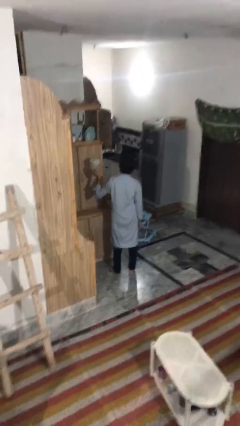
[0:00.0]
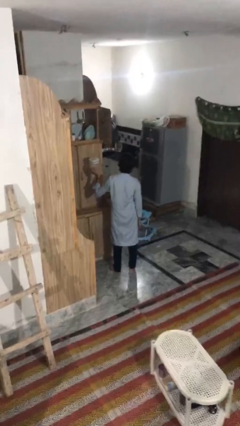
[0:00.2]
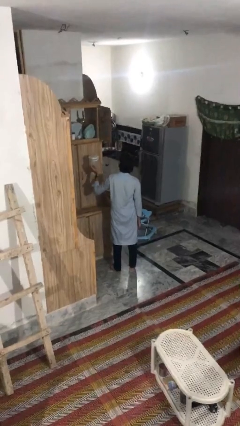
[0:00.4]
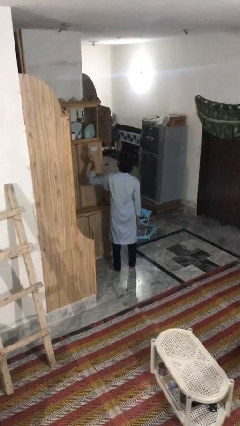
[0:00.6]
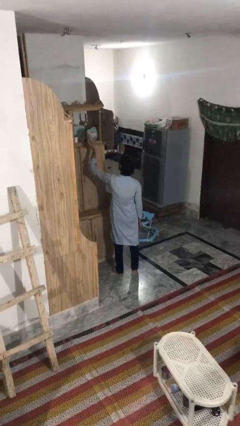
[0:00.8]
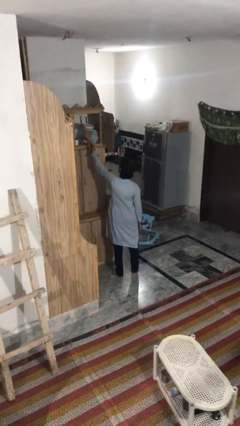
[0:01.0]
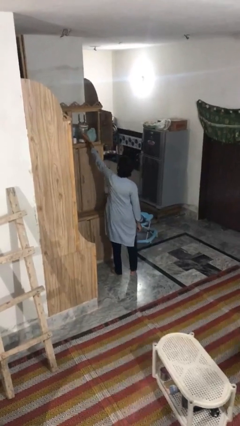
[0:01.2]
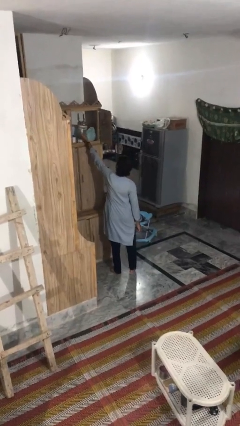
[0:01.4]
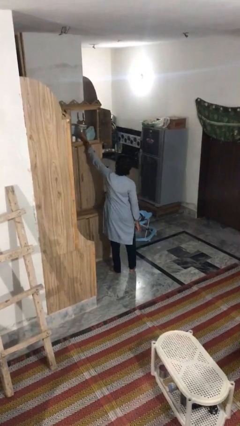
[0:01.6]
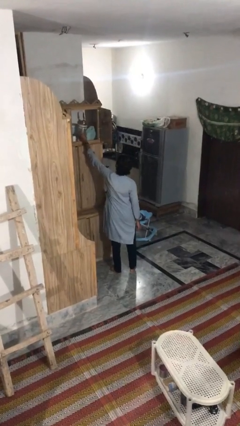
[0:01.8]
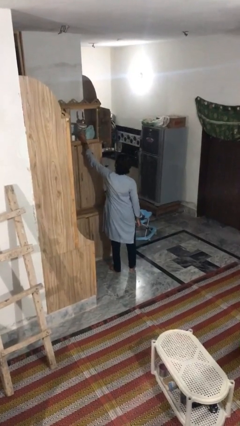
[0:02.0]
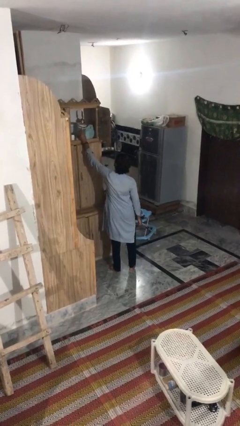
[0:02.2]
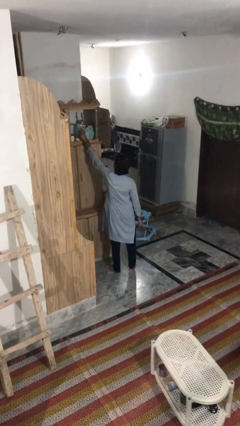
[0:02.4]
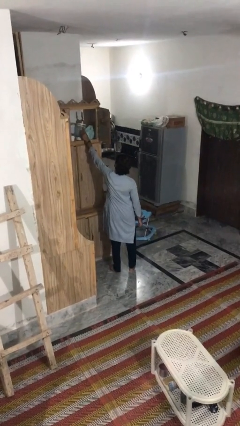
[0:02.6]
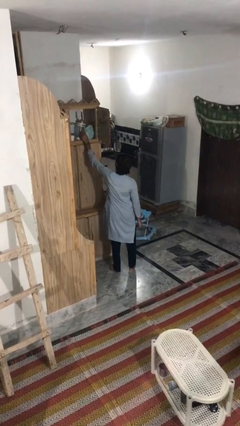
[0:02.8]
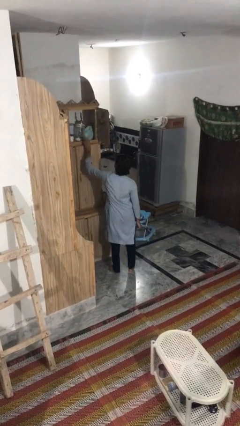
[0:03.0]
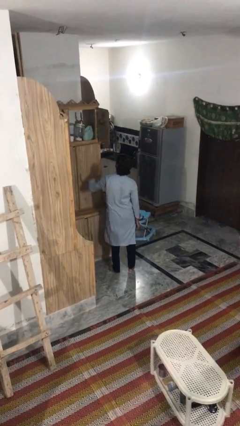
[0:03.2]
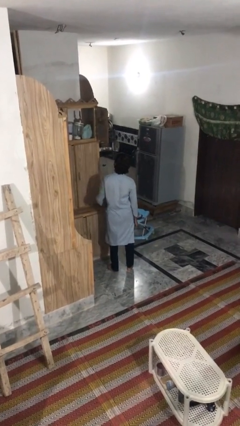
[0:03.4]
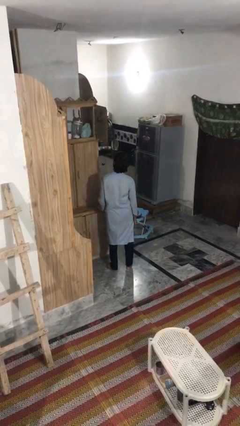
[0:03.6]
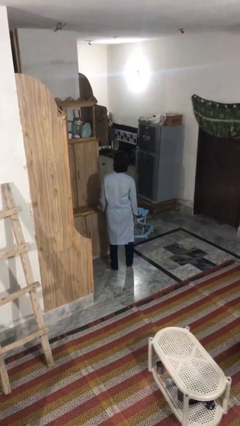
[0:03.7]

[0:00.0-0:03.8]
person puts down object on shelf

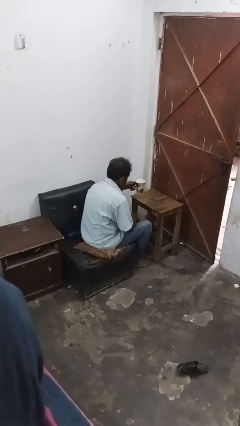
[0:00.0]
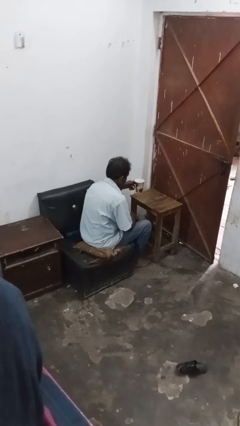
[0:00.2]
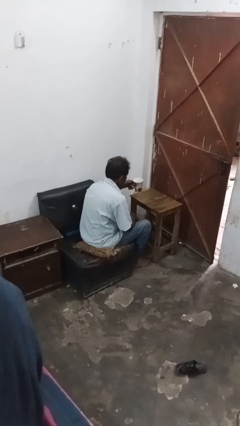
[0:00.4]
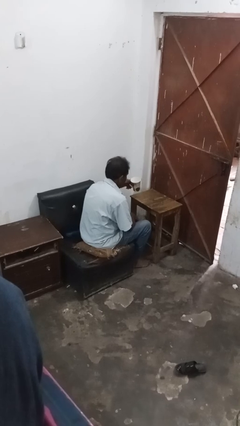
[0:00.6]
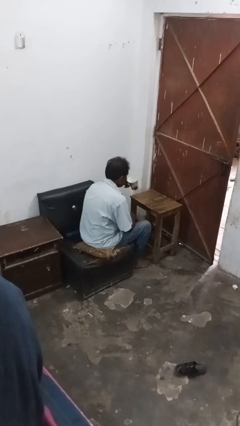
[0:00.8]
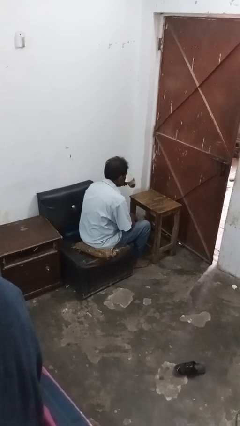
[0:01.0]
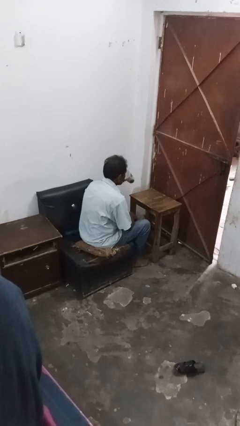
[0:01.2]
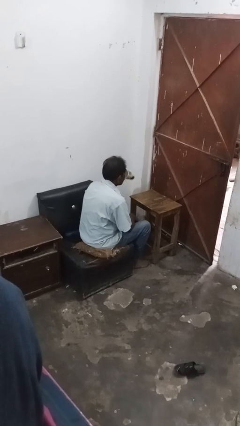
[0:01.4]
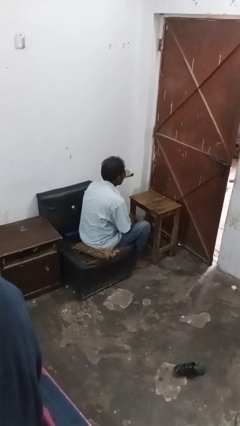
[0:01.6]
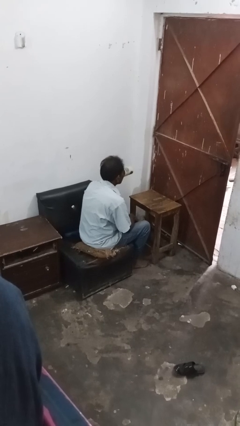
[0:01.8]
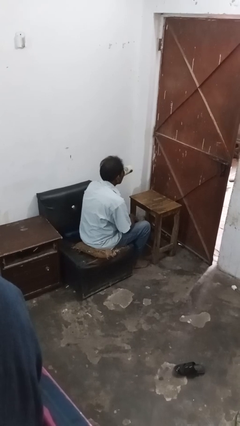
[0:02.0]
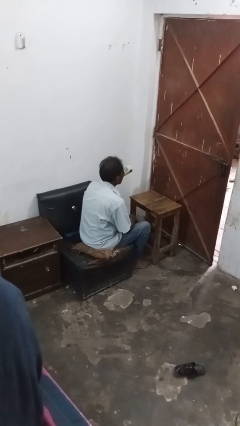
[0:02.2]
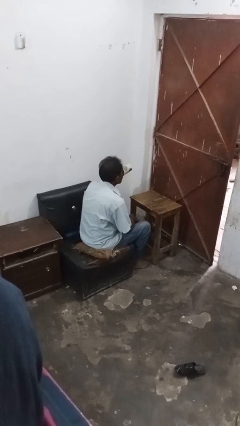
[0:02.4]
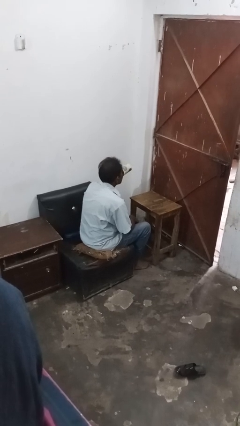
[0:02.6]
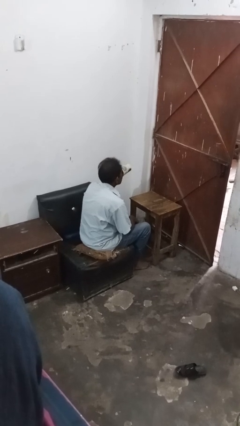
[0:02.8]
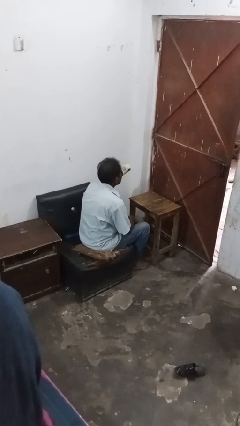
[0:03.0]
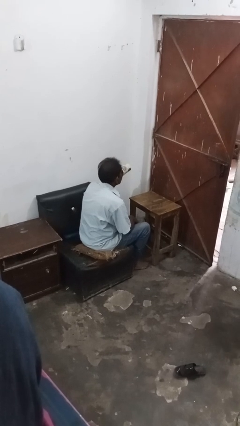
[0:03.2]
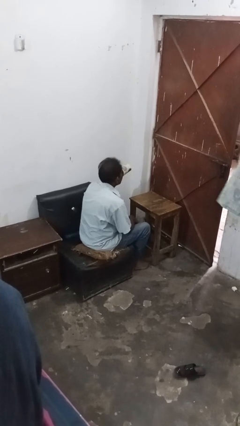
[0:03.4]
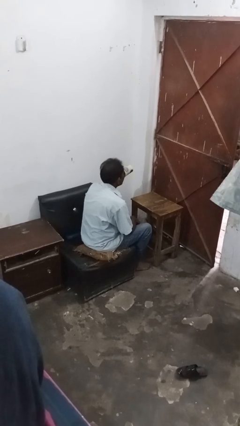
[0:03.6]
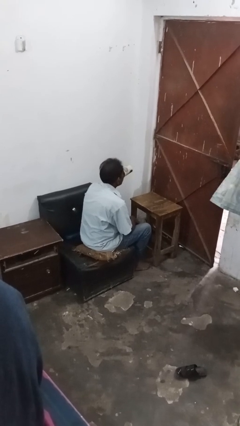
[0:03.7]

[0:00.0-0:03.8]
person drinks from mug

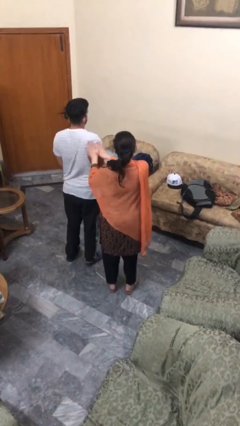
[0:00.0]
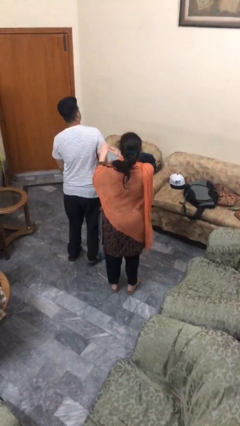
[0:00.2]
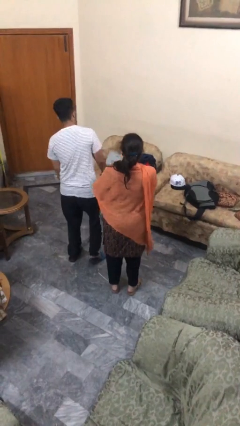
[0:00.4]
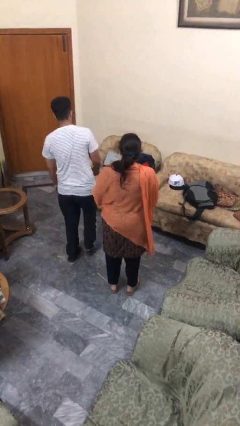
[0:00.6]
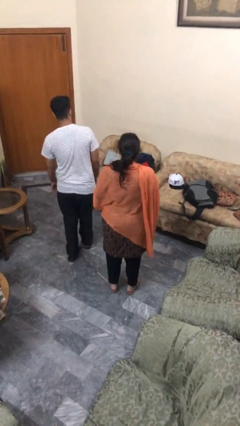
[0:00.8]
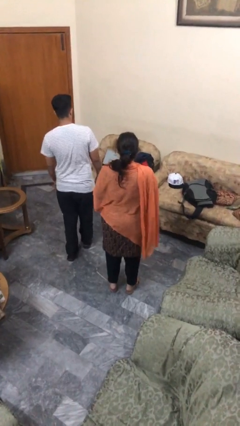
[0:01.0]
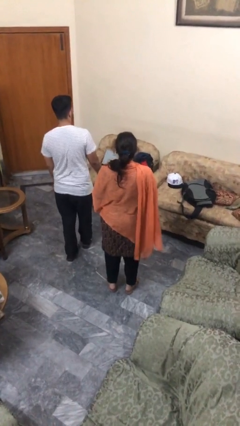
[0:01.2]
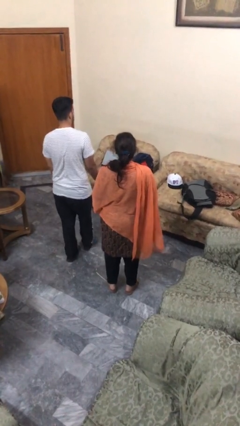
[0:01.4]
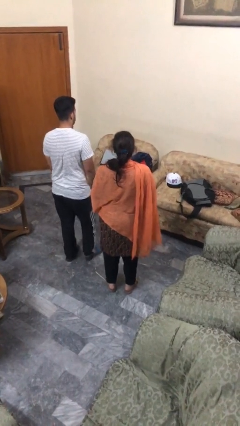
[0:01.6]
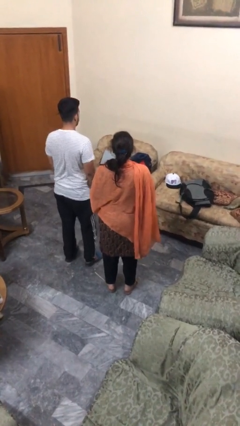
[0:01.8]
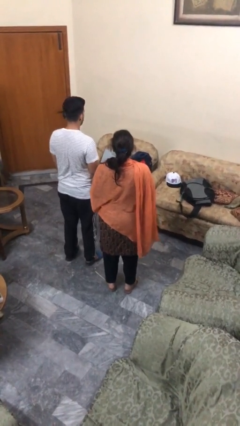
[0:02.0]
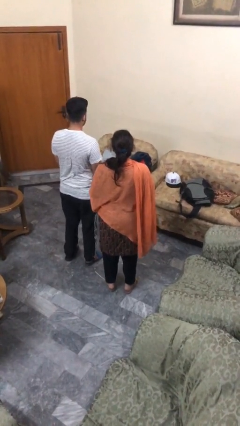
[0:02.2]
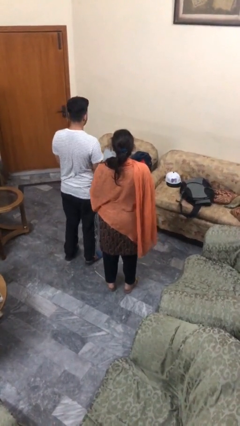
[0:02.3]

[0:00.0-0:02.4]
person shoves person

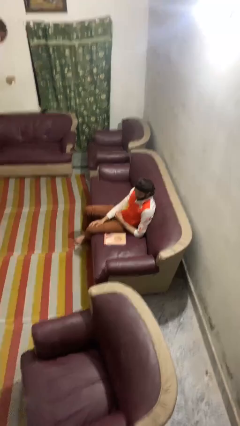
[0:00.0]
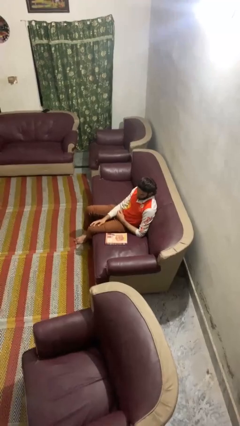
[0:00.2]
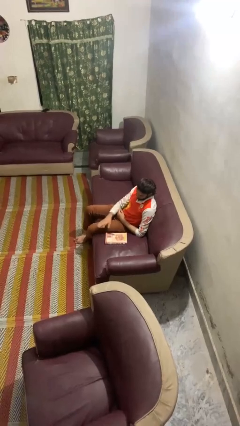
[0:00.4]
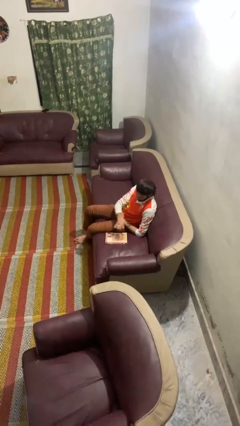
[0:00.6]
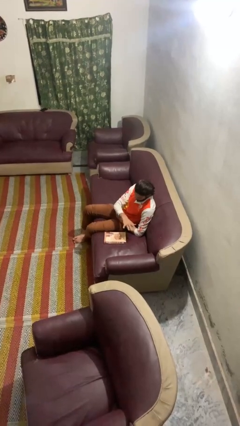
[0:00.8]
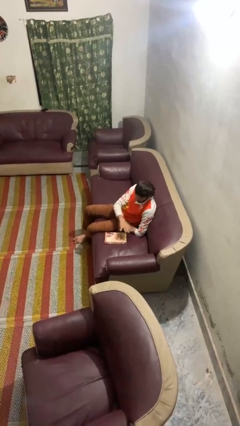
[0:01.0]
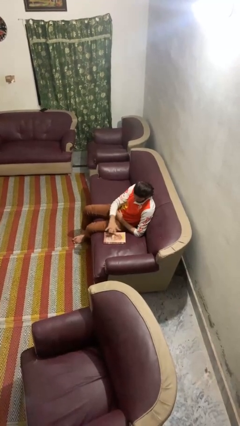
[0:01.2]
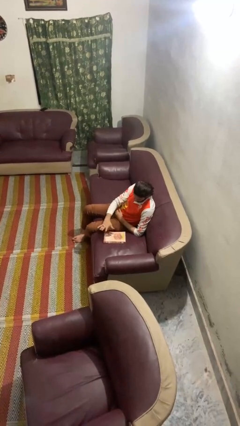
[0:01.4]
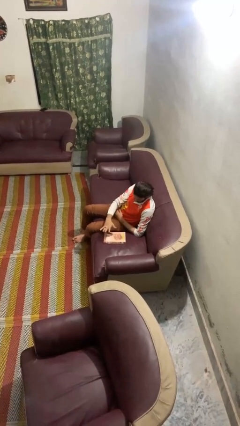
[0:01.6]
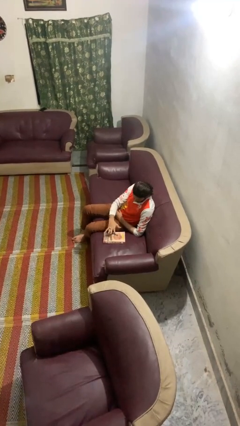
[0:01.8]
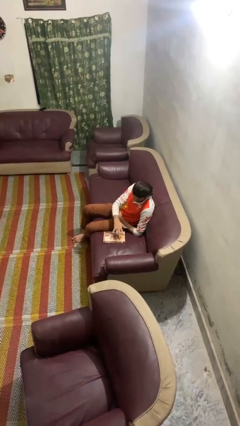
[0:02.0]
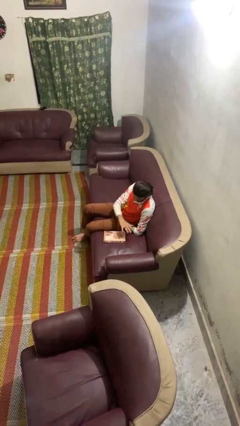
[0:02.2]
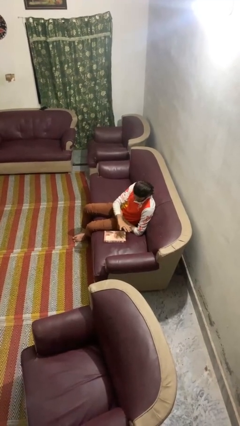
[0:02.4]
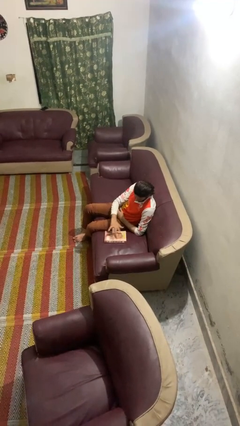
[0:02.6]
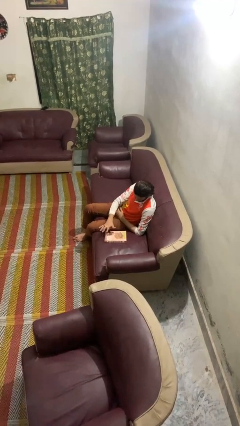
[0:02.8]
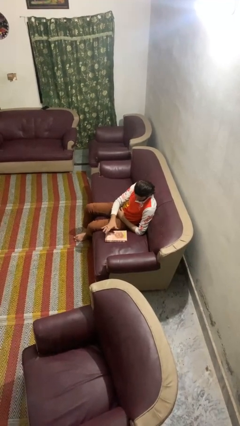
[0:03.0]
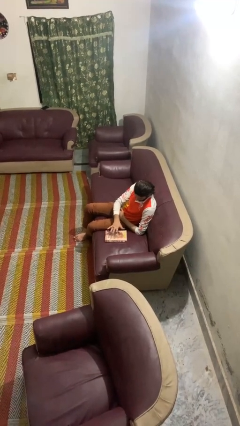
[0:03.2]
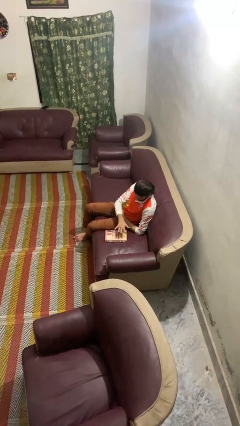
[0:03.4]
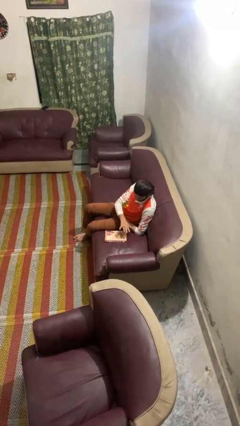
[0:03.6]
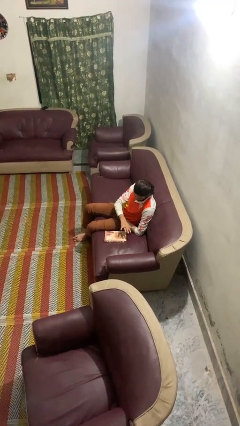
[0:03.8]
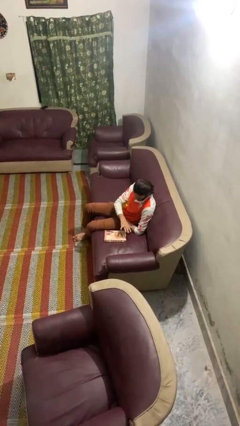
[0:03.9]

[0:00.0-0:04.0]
person waves hand over object

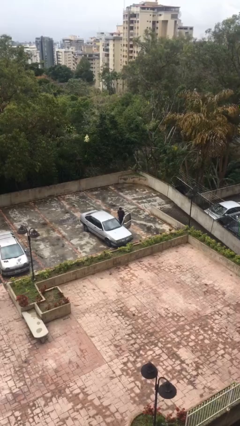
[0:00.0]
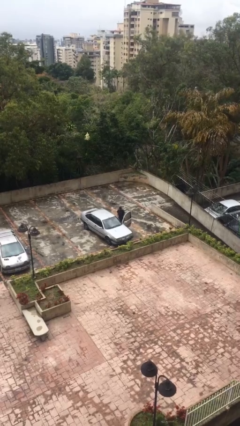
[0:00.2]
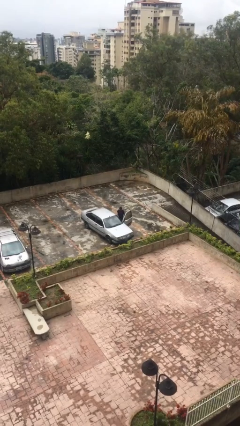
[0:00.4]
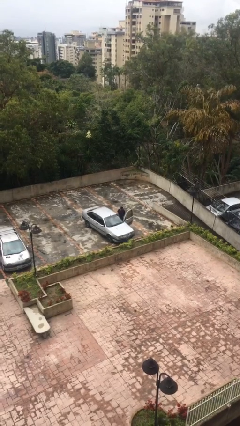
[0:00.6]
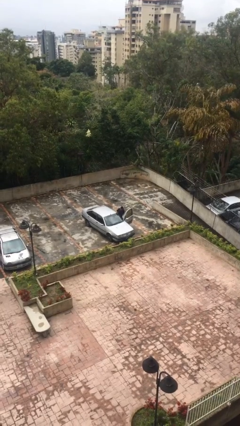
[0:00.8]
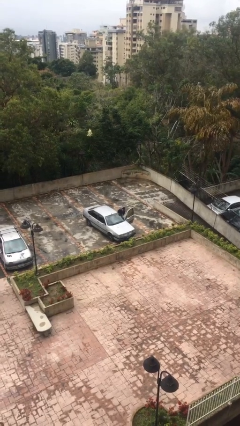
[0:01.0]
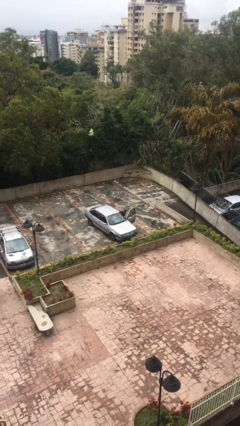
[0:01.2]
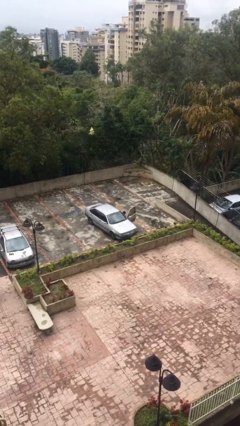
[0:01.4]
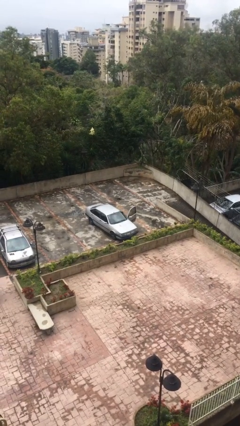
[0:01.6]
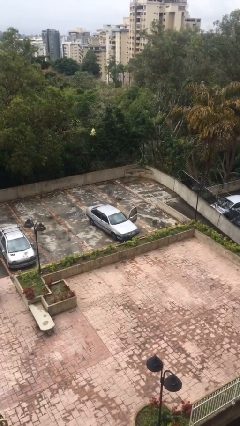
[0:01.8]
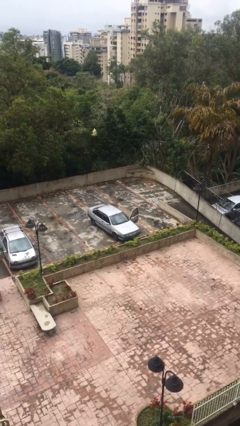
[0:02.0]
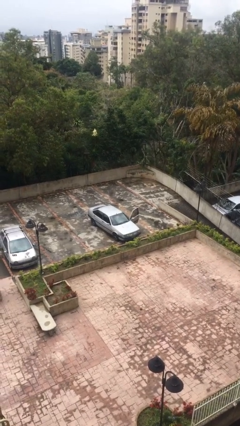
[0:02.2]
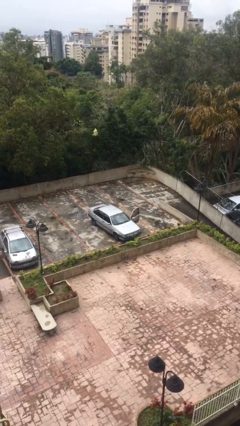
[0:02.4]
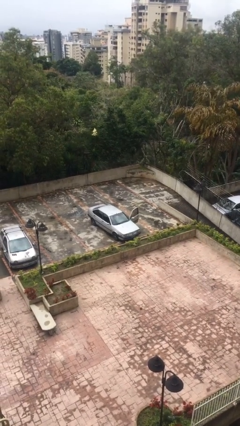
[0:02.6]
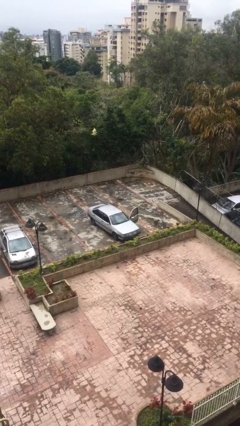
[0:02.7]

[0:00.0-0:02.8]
person enters car

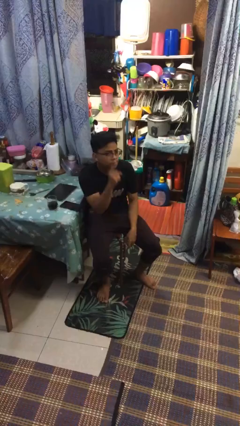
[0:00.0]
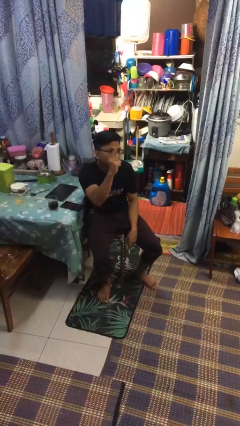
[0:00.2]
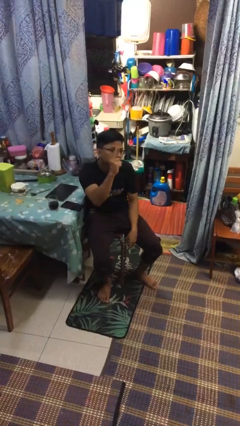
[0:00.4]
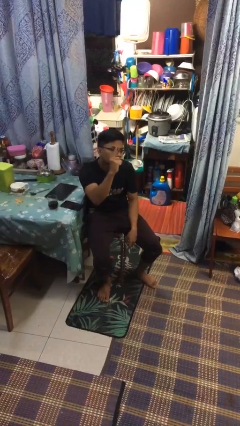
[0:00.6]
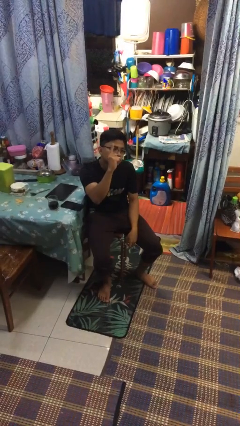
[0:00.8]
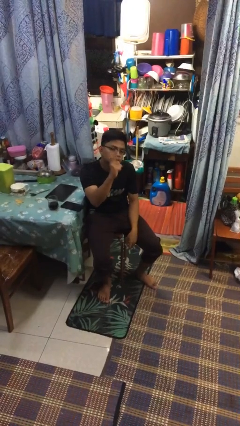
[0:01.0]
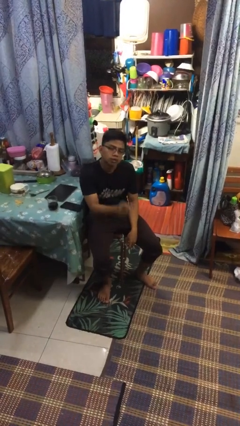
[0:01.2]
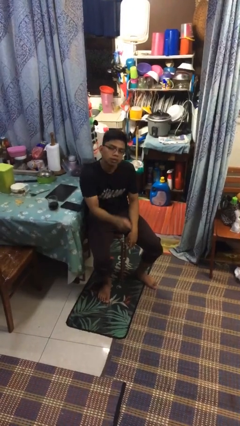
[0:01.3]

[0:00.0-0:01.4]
person gestures number one
